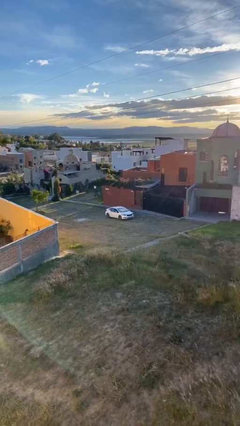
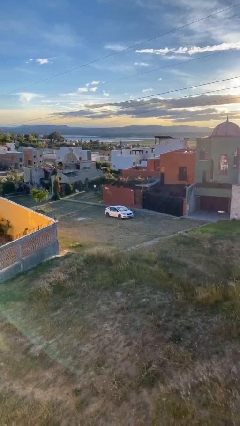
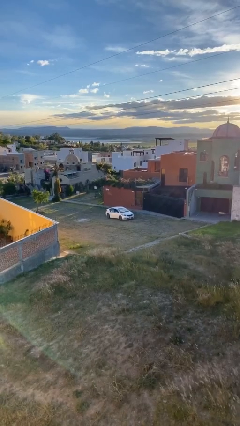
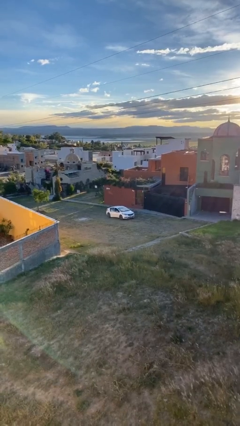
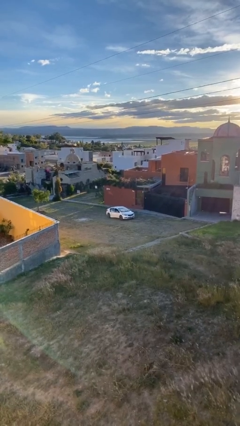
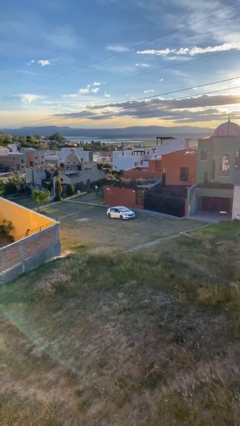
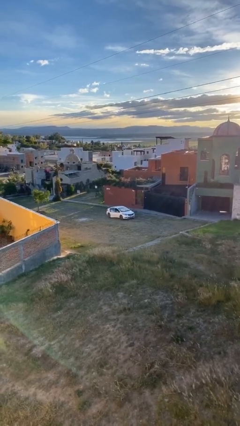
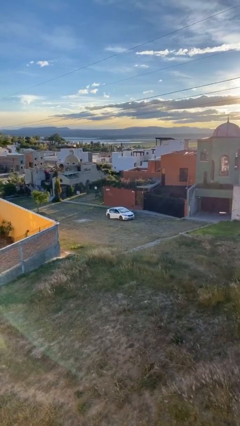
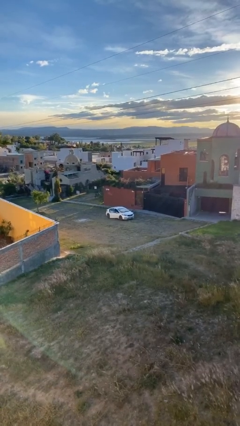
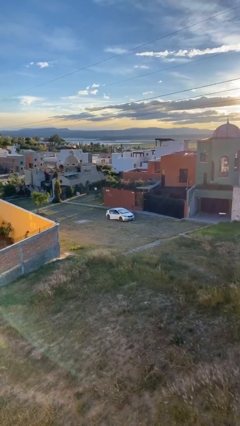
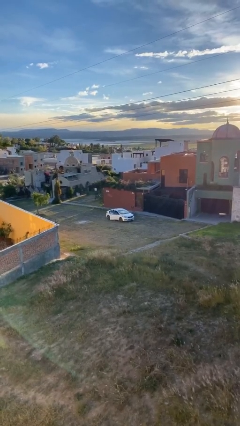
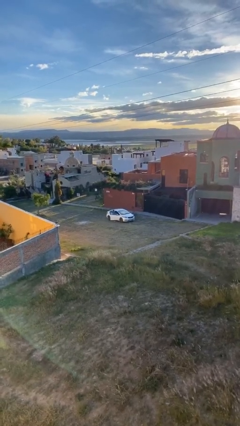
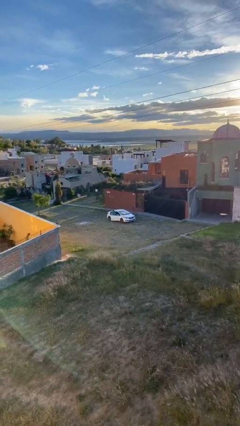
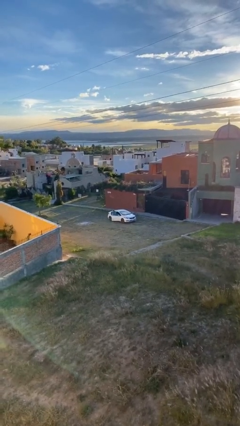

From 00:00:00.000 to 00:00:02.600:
car drops off person

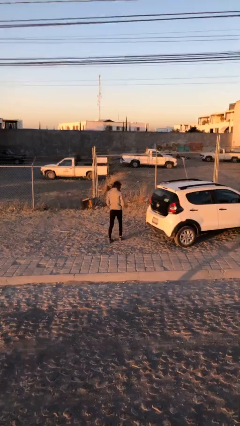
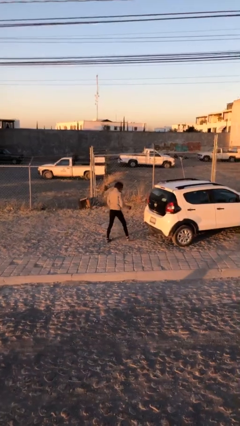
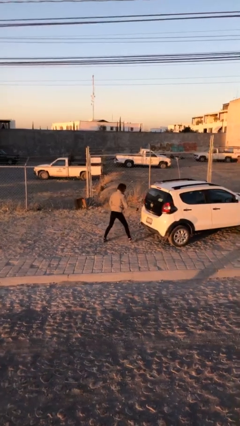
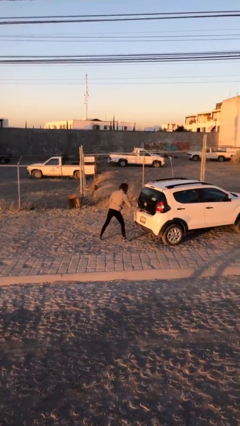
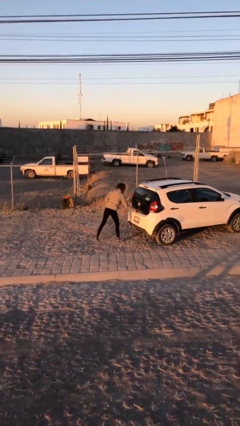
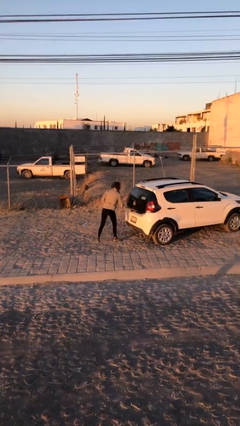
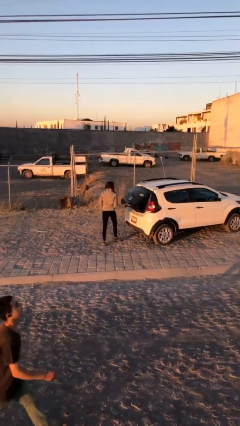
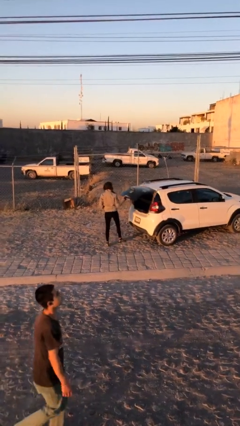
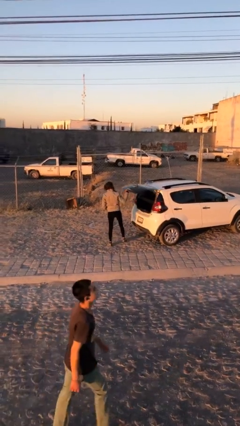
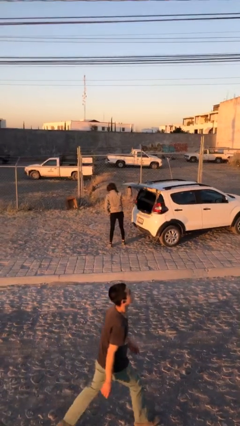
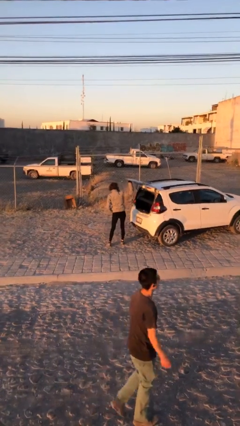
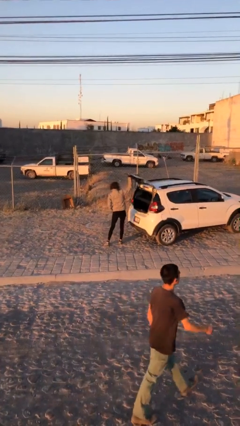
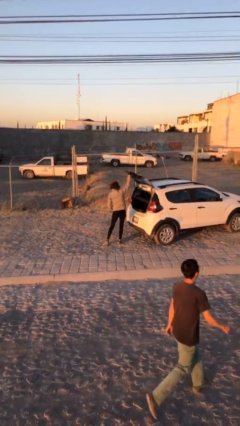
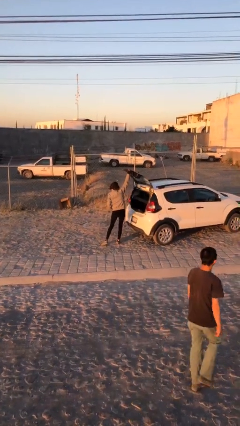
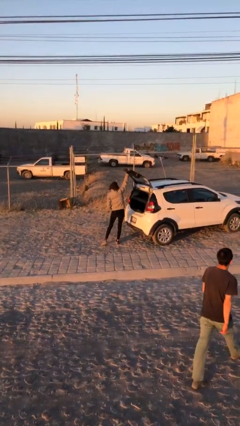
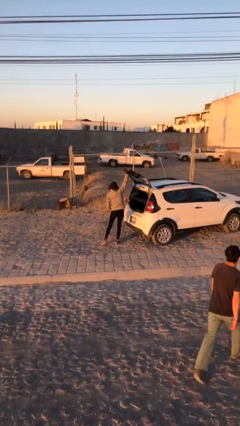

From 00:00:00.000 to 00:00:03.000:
person opens car trunk

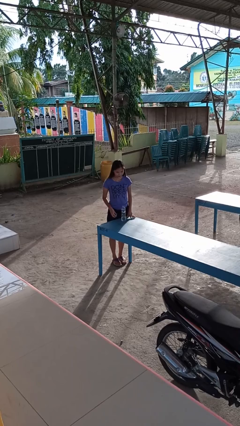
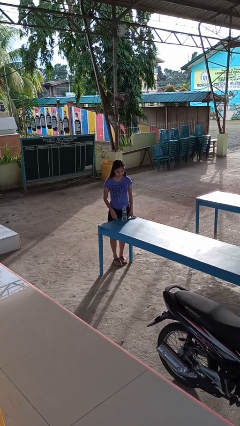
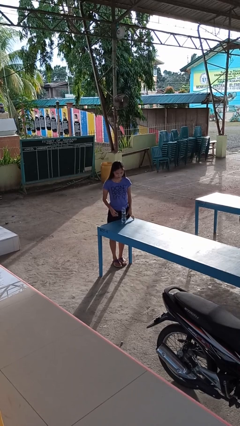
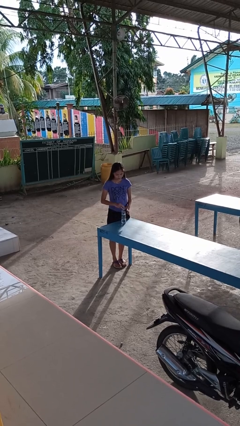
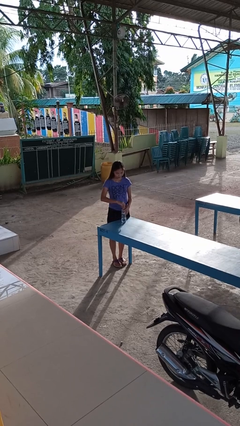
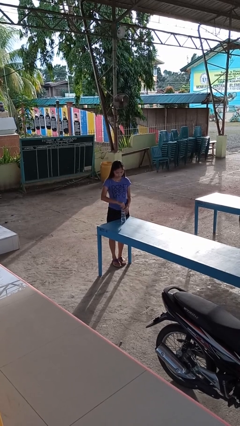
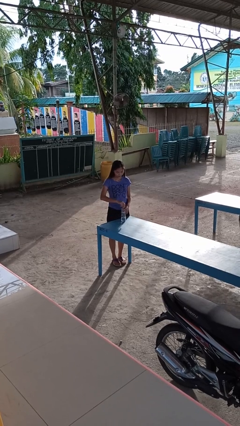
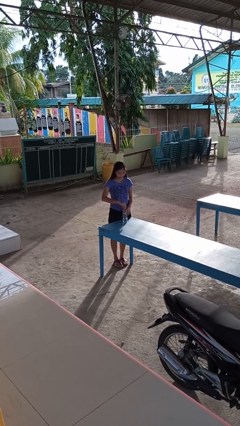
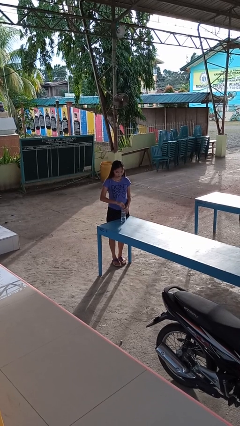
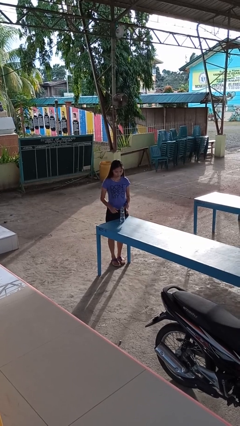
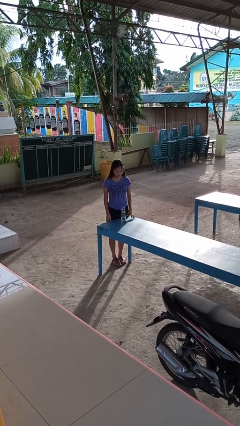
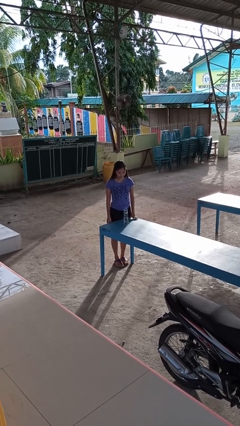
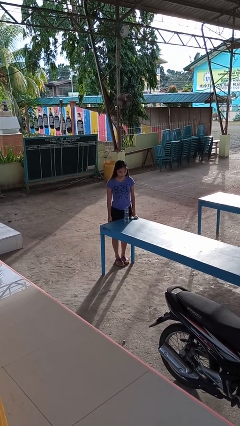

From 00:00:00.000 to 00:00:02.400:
person screws lid to bottle

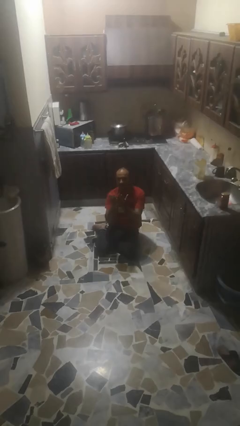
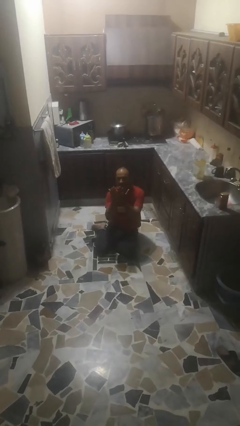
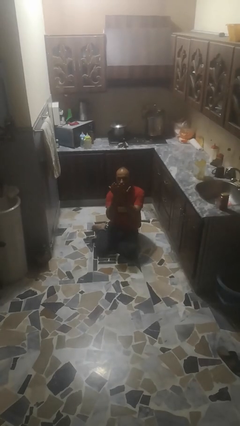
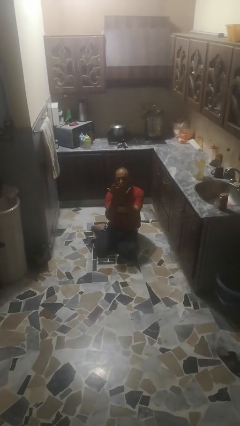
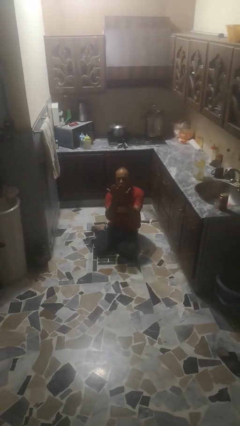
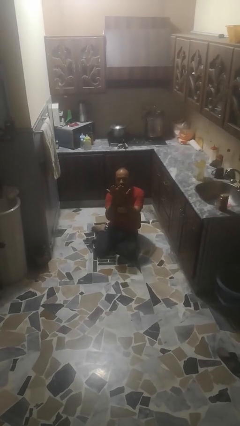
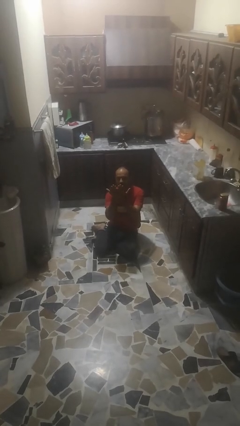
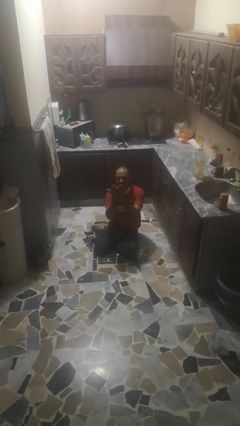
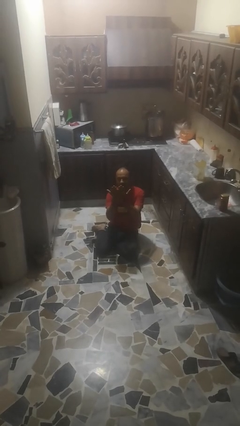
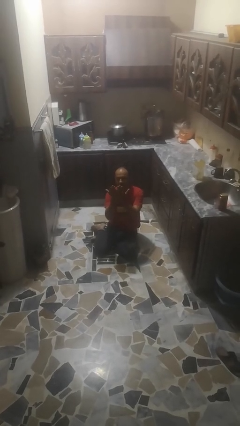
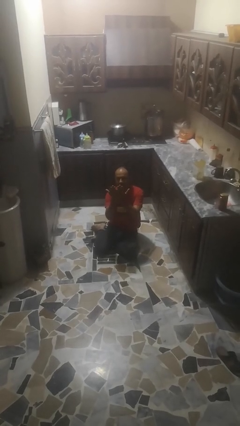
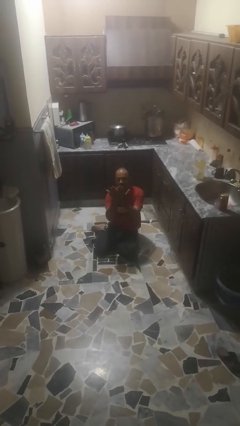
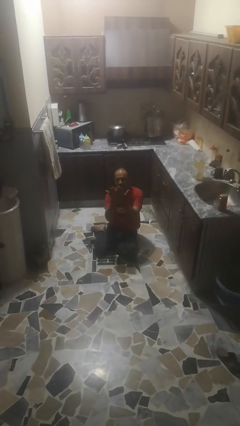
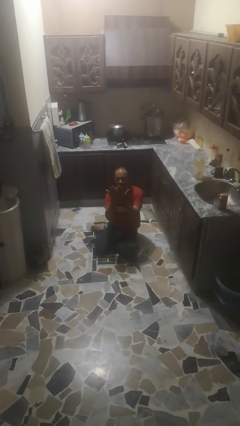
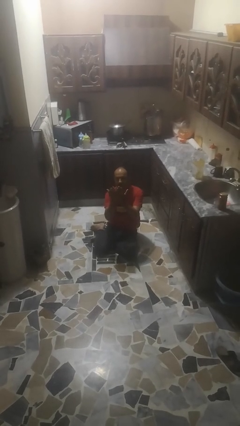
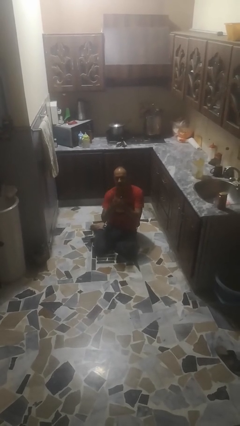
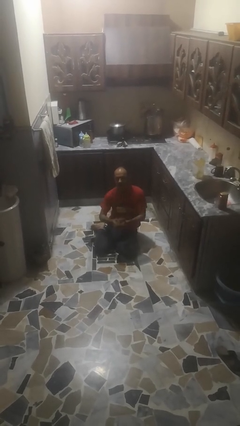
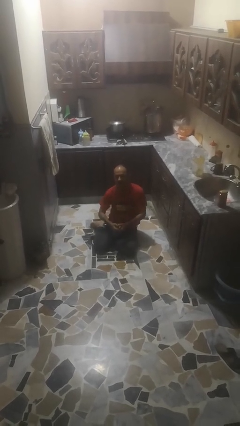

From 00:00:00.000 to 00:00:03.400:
person prays

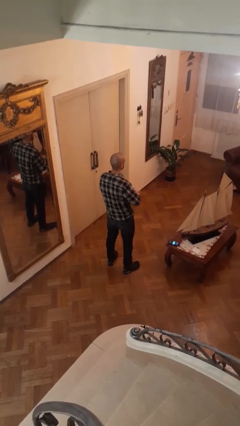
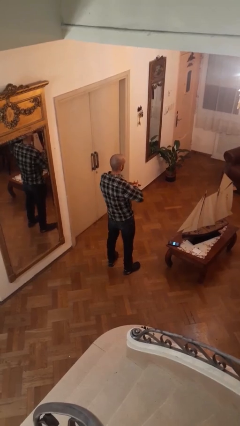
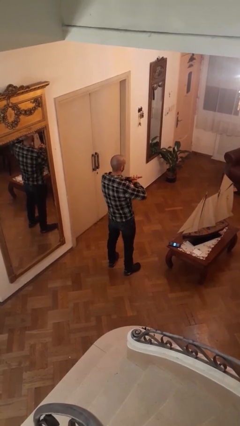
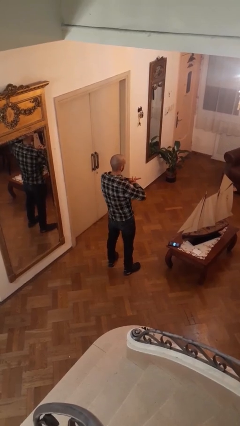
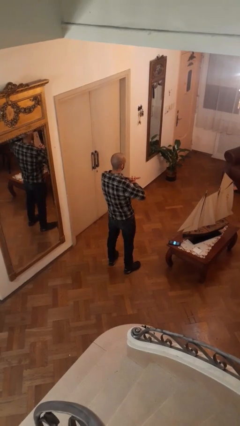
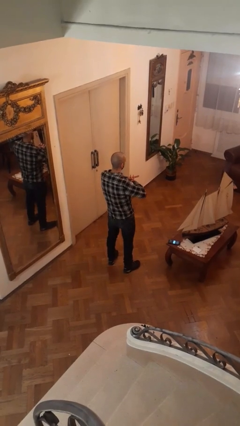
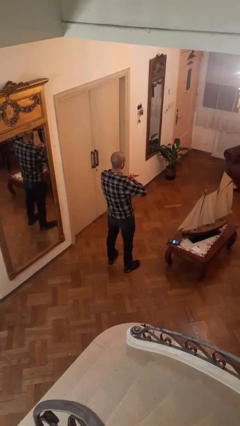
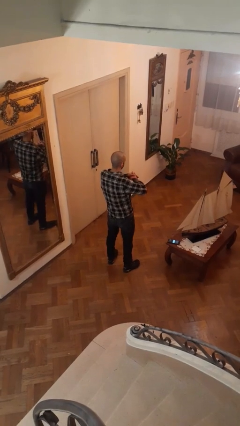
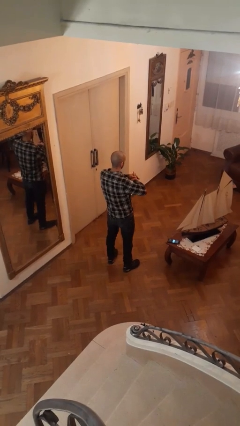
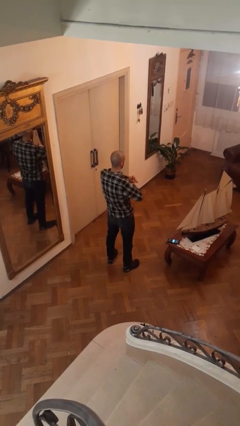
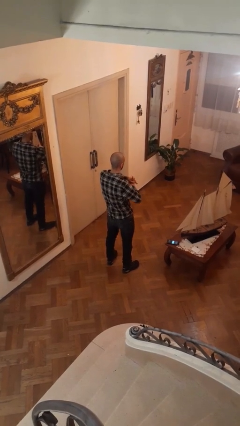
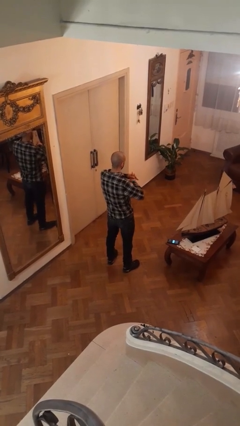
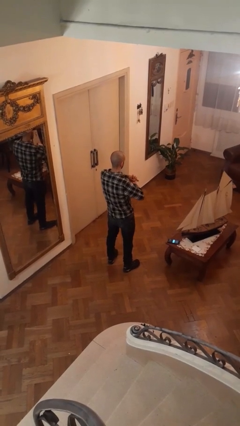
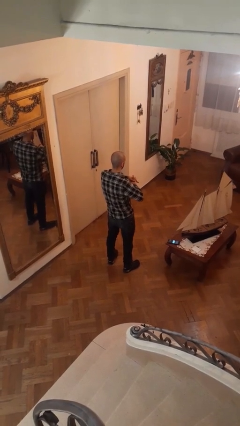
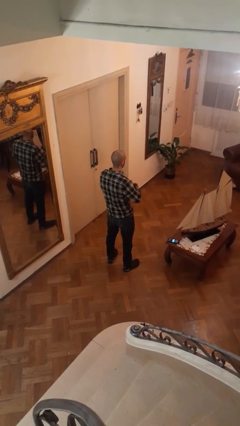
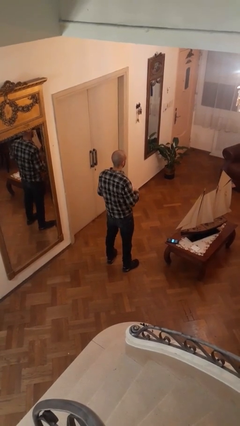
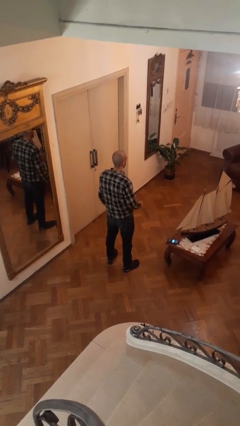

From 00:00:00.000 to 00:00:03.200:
person cracks knuckles

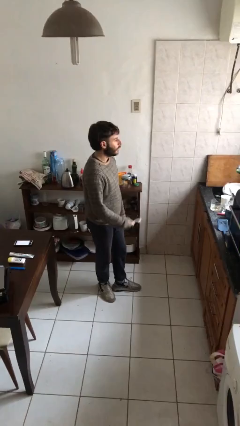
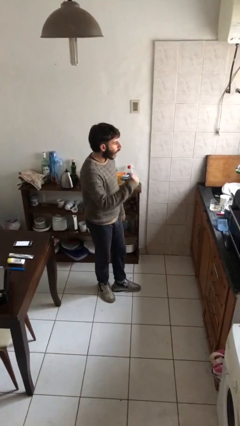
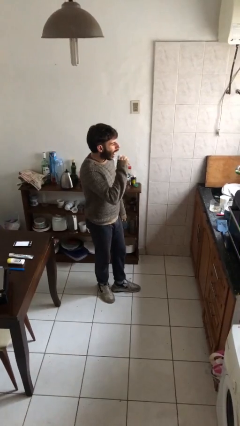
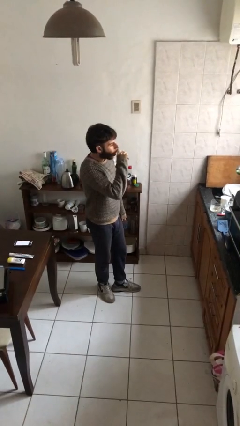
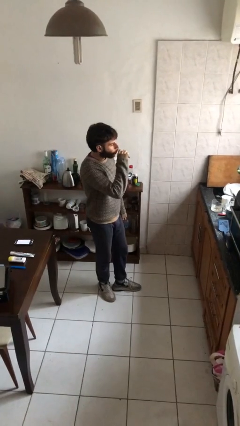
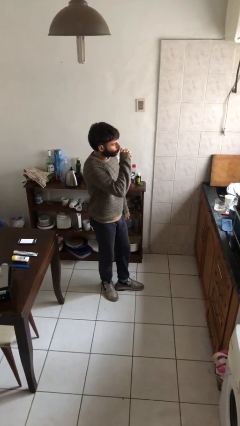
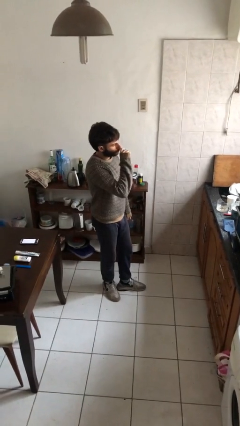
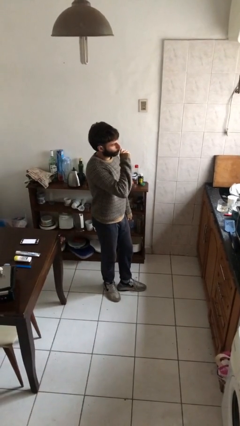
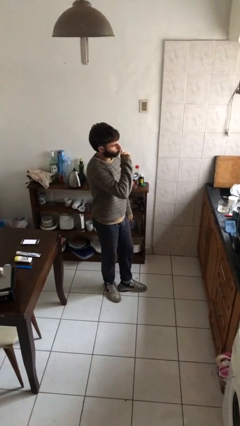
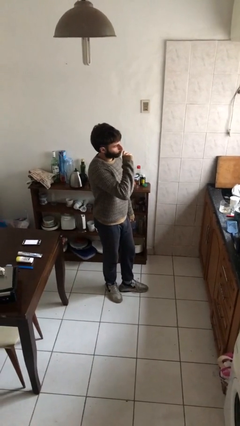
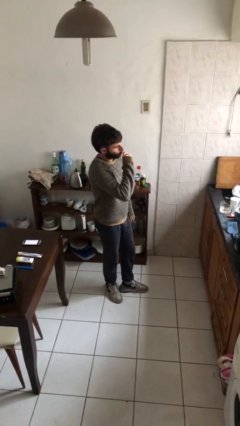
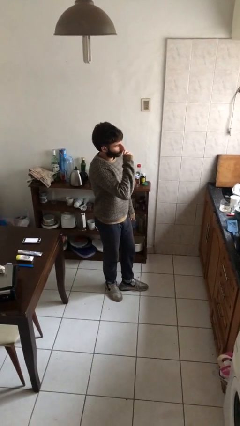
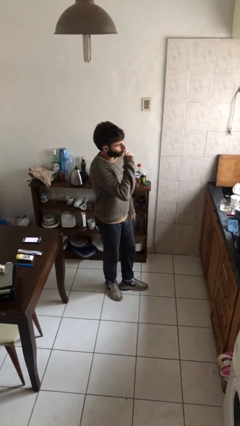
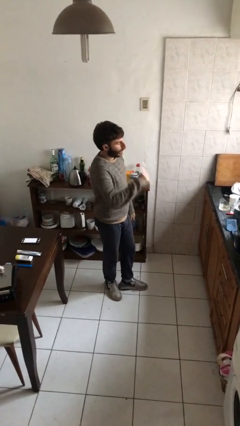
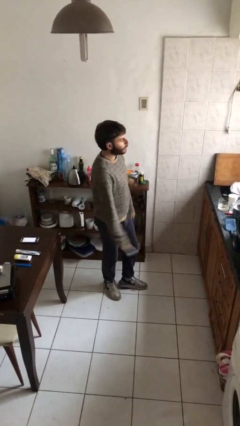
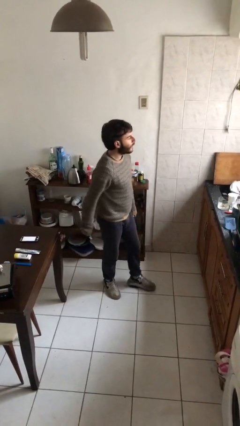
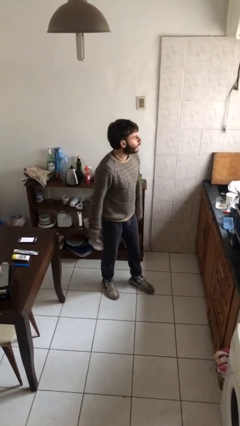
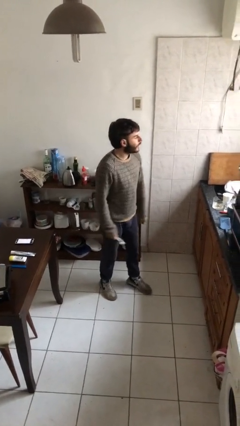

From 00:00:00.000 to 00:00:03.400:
person brushes teeth
